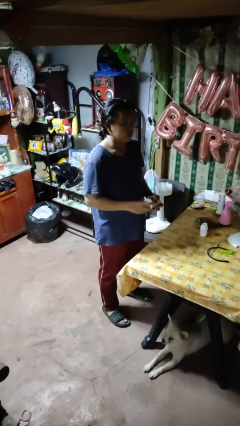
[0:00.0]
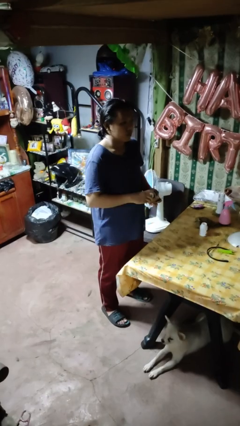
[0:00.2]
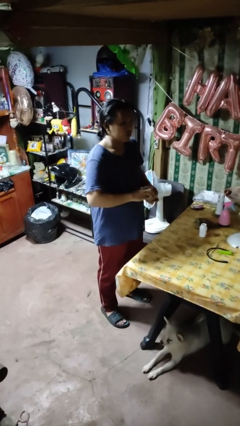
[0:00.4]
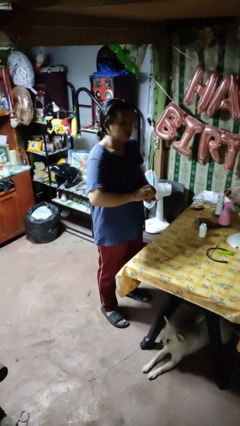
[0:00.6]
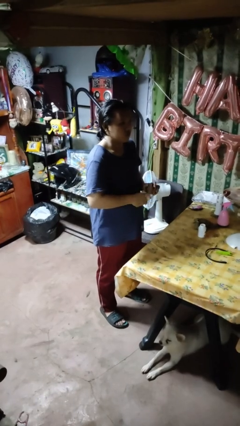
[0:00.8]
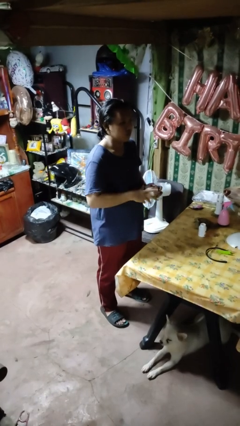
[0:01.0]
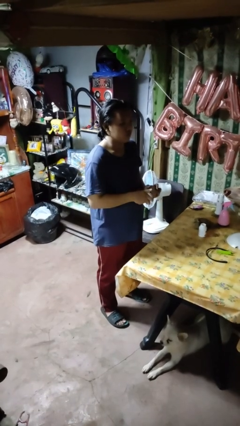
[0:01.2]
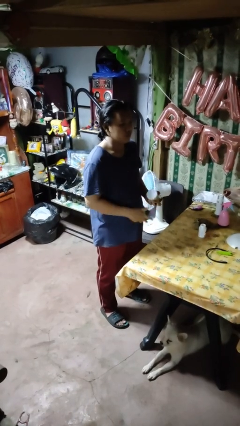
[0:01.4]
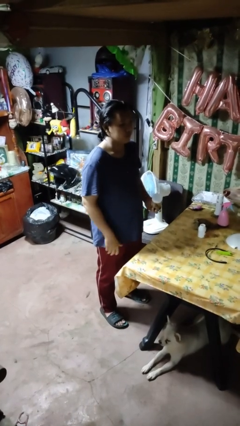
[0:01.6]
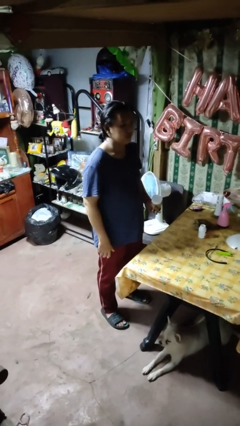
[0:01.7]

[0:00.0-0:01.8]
person closes jar

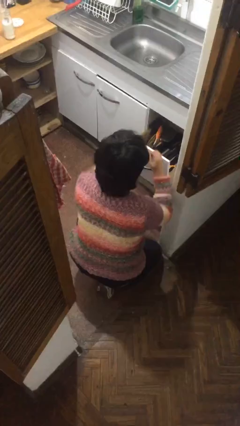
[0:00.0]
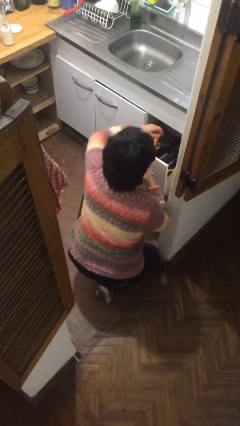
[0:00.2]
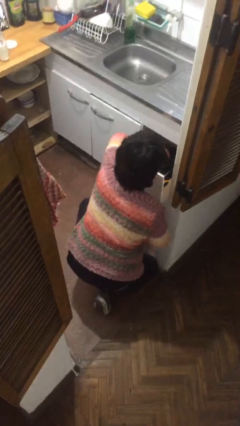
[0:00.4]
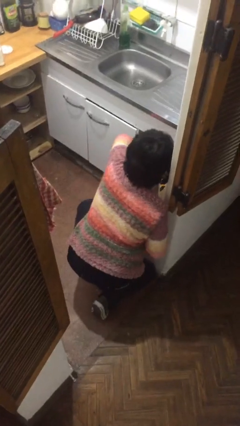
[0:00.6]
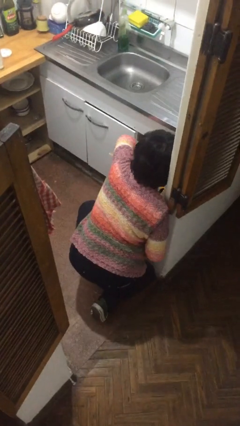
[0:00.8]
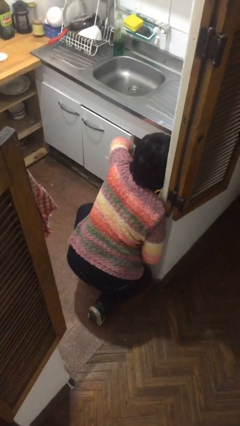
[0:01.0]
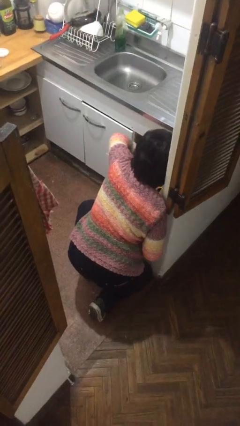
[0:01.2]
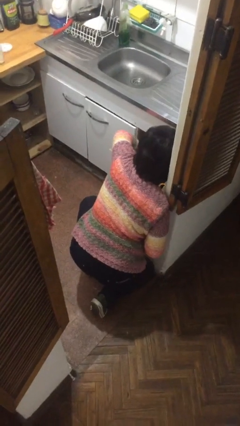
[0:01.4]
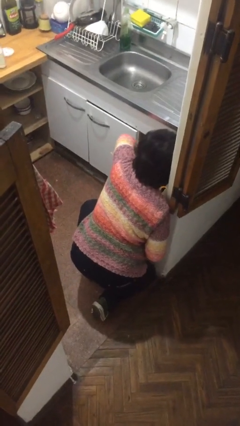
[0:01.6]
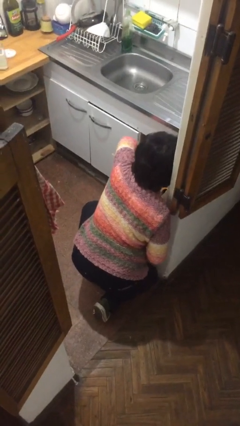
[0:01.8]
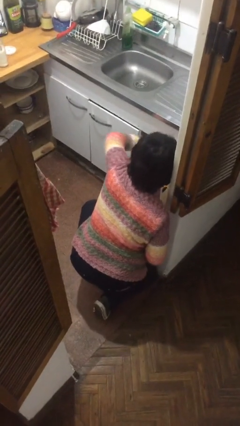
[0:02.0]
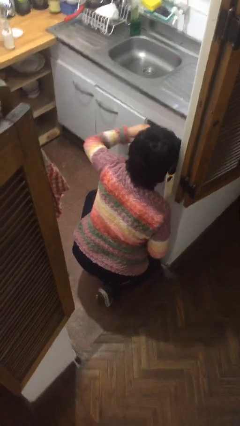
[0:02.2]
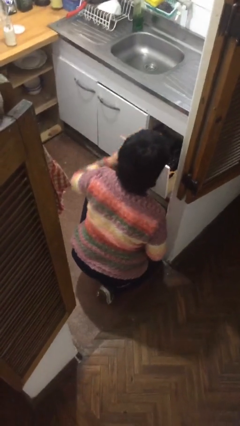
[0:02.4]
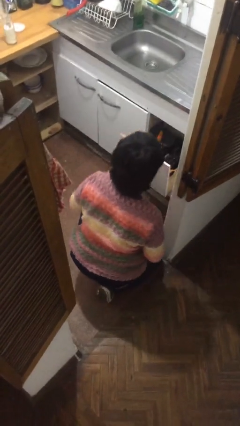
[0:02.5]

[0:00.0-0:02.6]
person searches in kitchen drawer

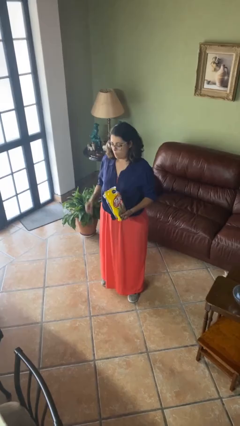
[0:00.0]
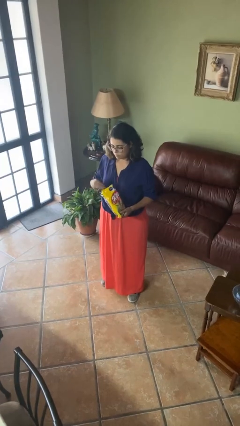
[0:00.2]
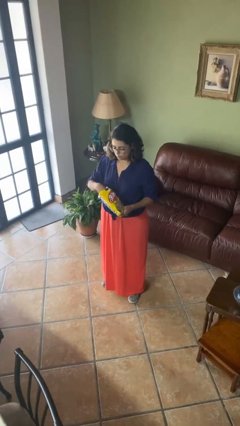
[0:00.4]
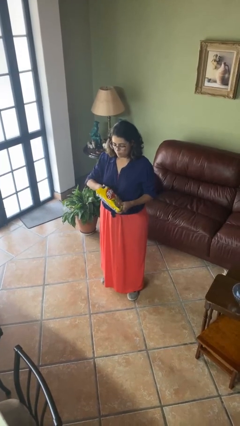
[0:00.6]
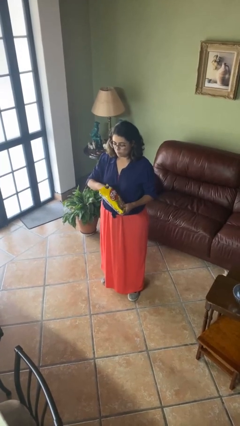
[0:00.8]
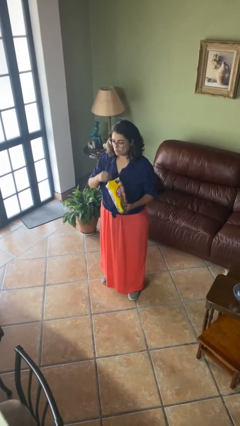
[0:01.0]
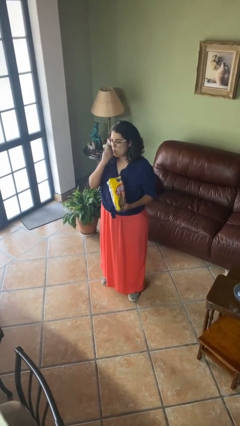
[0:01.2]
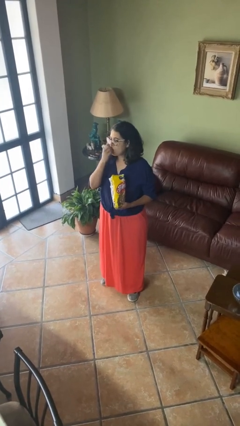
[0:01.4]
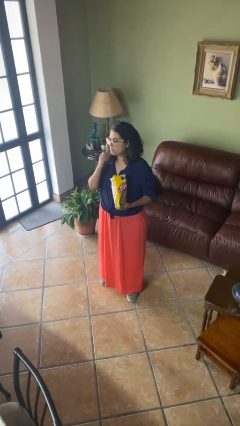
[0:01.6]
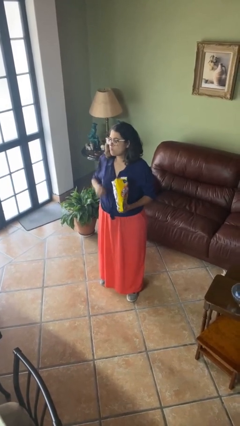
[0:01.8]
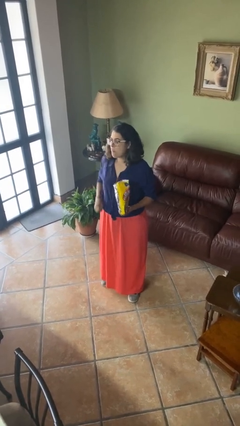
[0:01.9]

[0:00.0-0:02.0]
person eats snack from bag

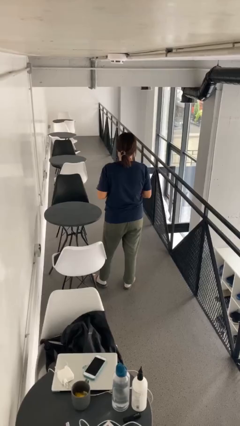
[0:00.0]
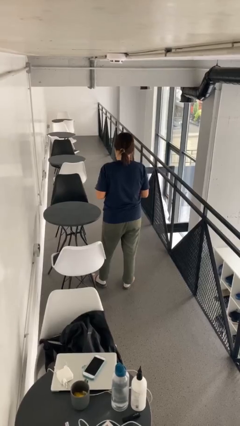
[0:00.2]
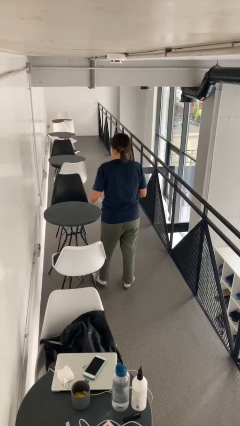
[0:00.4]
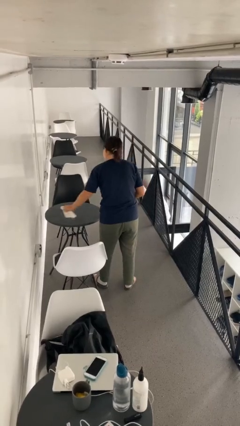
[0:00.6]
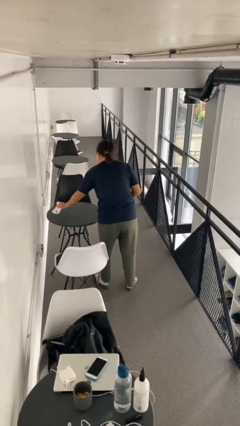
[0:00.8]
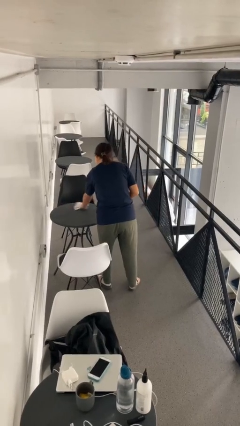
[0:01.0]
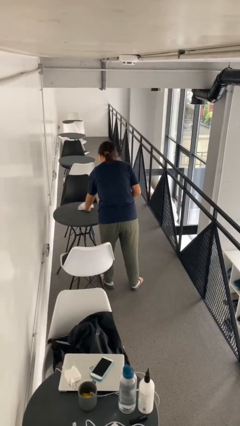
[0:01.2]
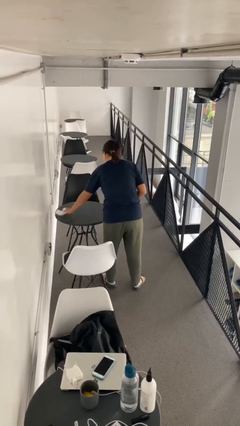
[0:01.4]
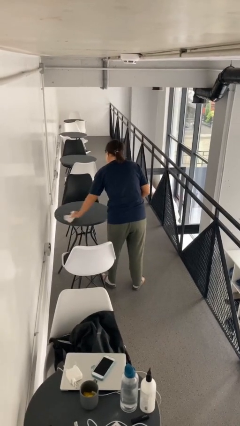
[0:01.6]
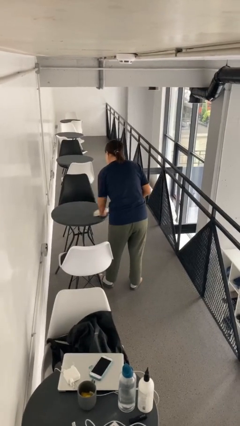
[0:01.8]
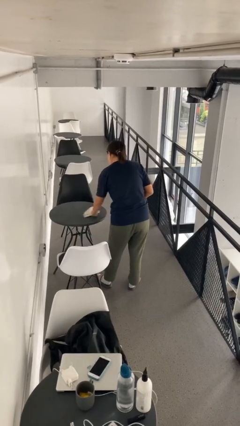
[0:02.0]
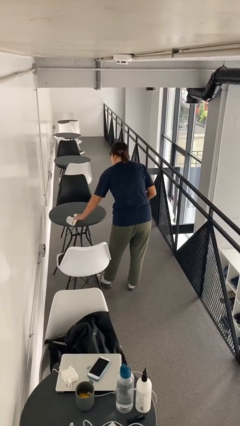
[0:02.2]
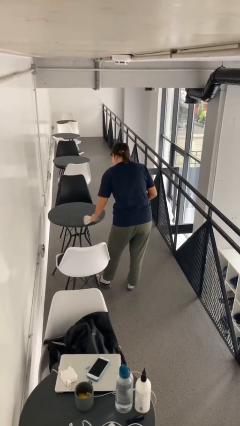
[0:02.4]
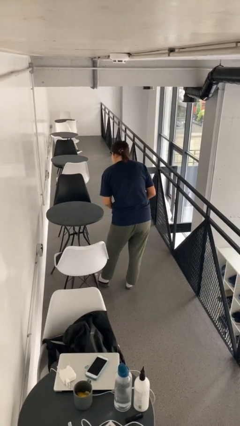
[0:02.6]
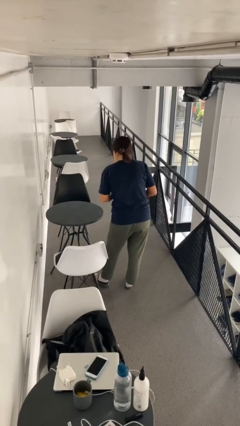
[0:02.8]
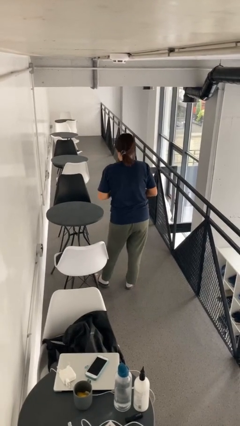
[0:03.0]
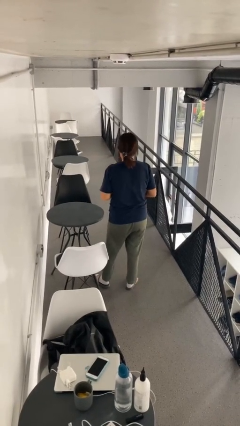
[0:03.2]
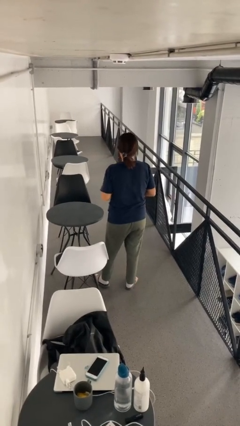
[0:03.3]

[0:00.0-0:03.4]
person cleans table with rag

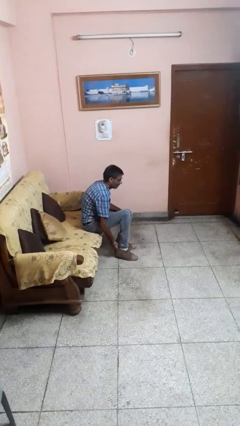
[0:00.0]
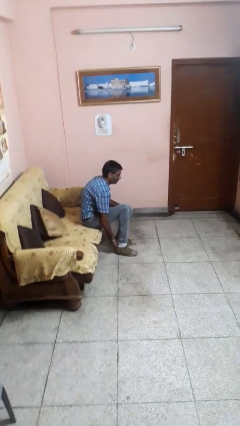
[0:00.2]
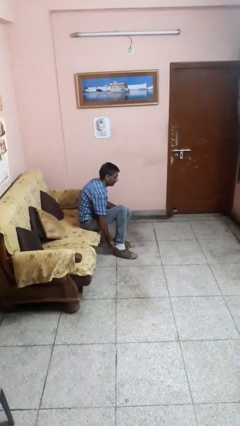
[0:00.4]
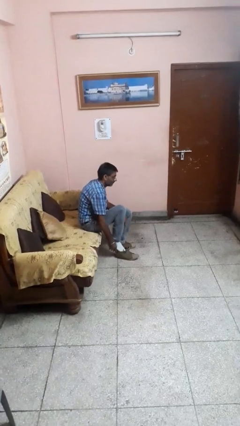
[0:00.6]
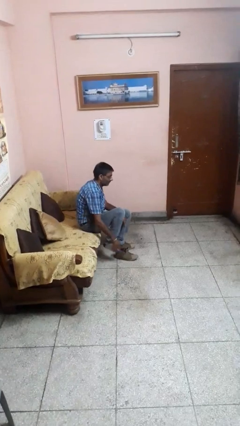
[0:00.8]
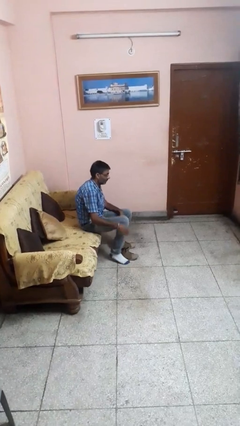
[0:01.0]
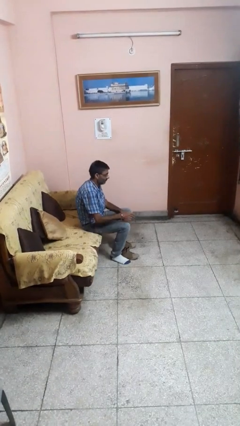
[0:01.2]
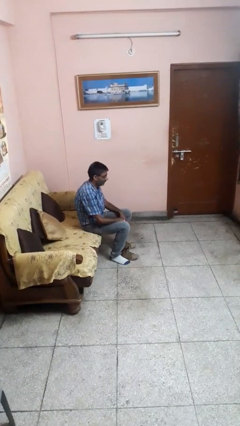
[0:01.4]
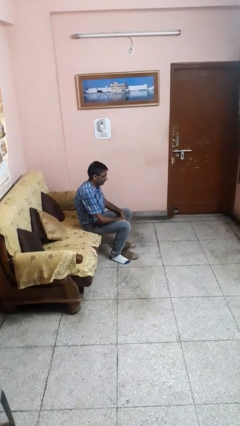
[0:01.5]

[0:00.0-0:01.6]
person takes off shoes

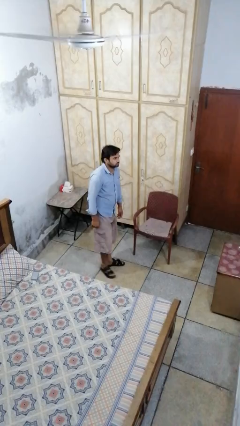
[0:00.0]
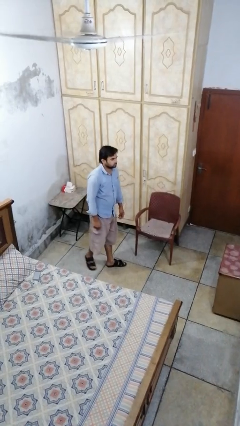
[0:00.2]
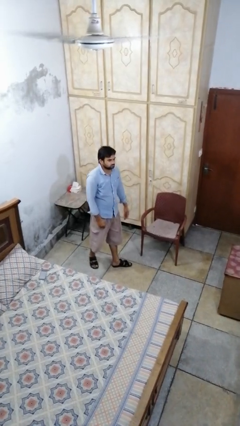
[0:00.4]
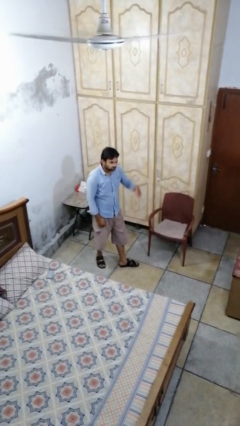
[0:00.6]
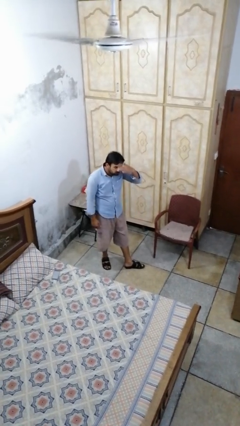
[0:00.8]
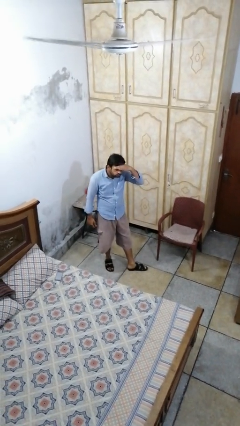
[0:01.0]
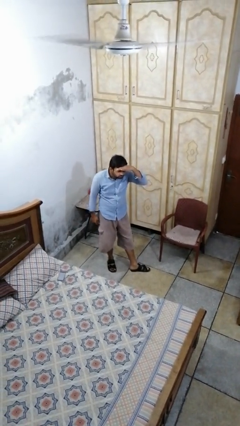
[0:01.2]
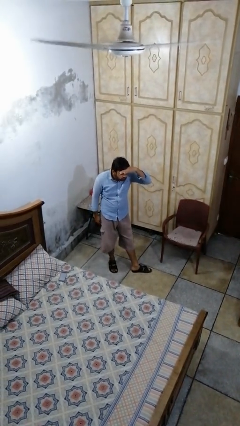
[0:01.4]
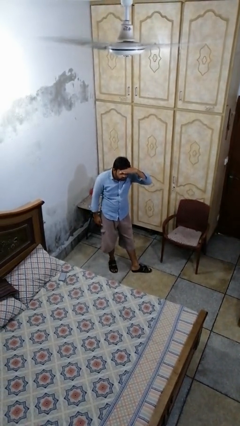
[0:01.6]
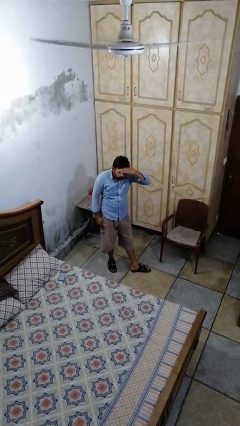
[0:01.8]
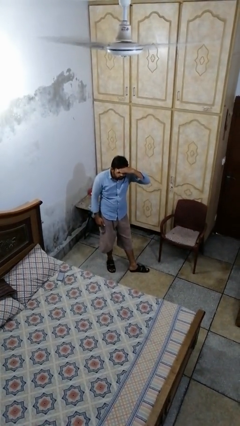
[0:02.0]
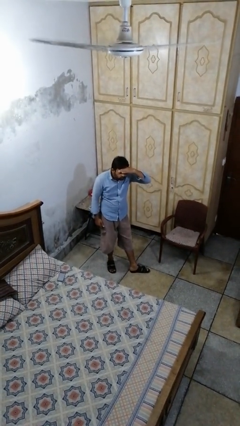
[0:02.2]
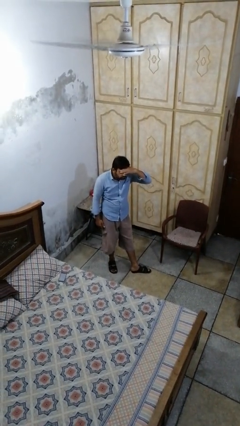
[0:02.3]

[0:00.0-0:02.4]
person shades eyes

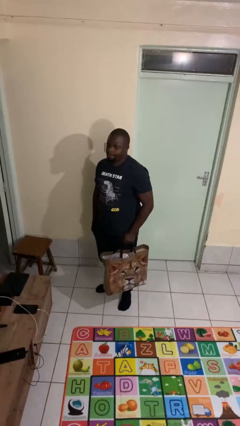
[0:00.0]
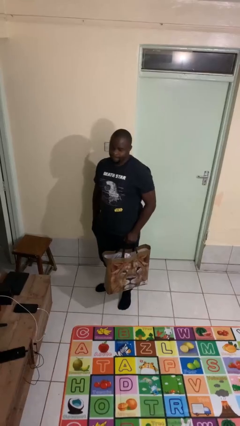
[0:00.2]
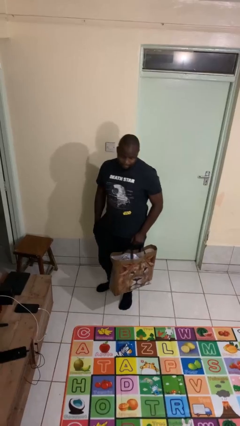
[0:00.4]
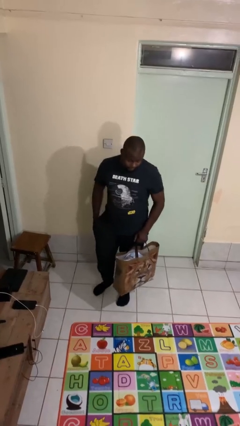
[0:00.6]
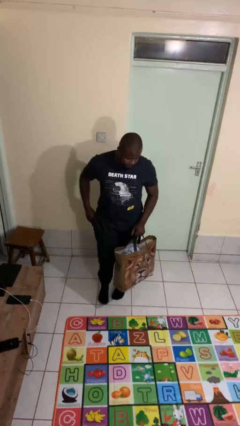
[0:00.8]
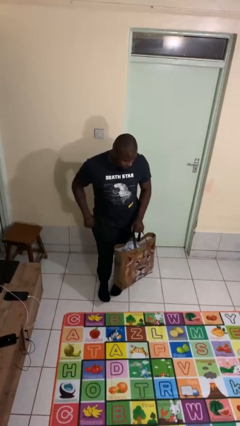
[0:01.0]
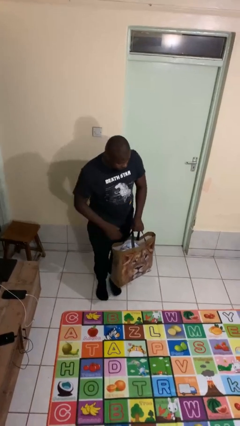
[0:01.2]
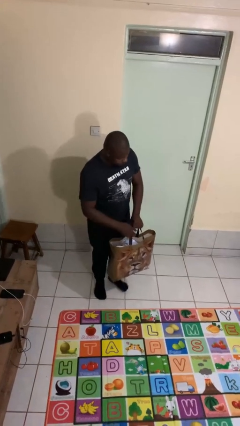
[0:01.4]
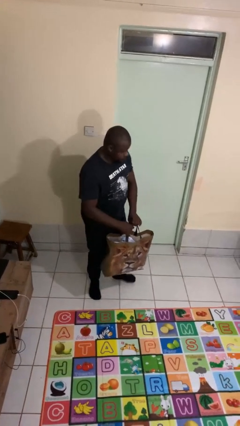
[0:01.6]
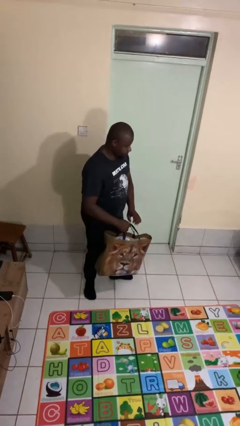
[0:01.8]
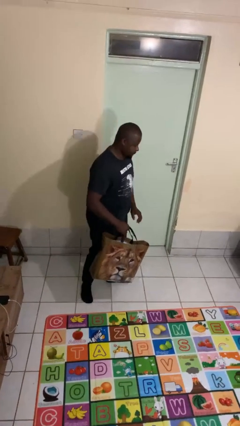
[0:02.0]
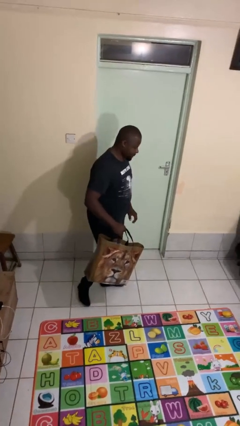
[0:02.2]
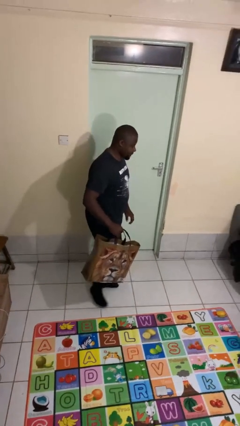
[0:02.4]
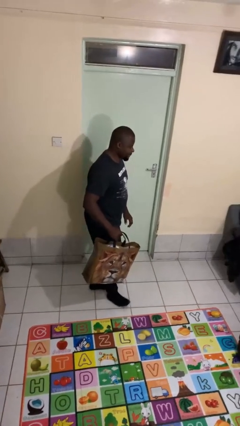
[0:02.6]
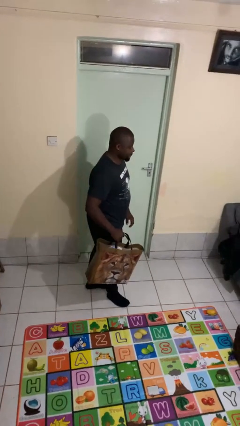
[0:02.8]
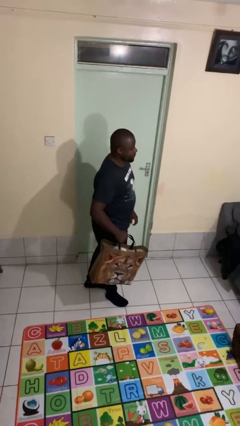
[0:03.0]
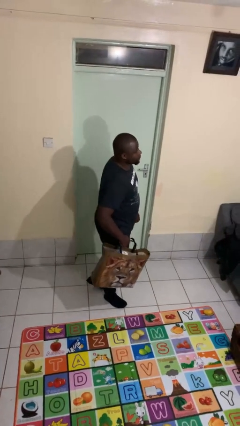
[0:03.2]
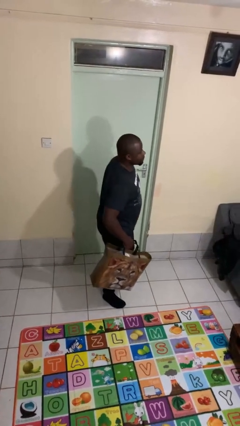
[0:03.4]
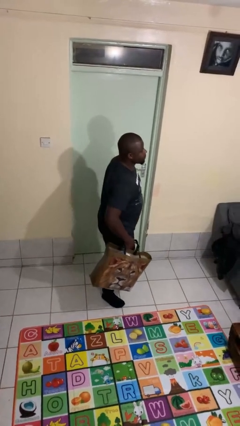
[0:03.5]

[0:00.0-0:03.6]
person carries groceries
